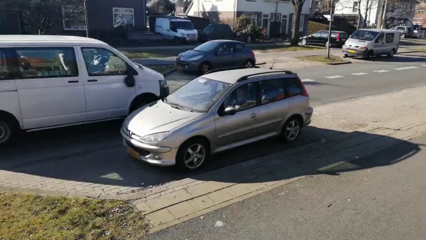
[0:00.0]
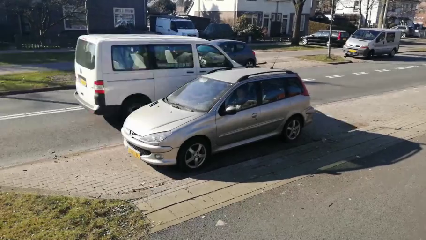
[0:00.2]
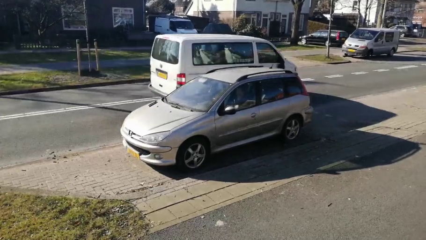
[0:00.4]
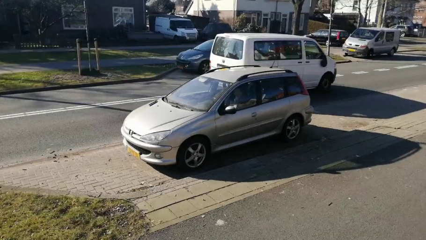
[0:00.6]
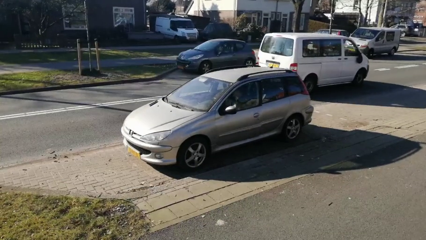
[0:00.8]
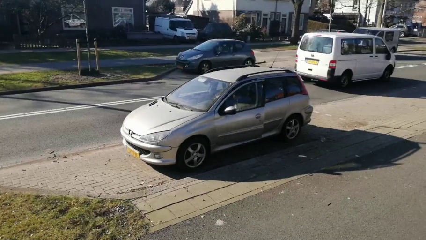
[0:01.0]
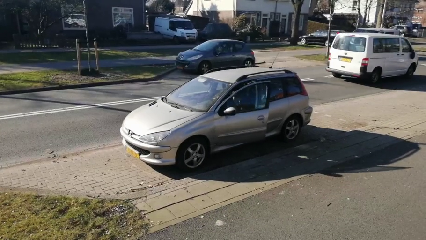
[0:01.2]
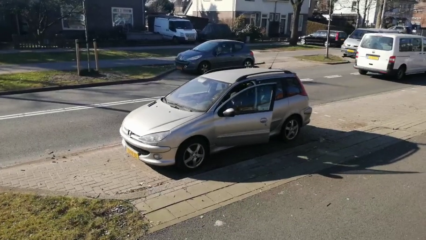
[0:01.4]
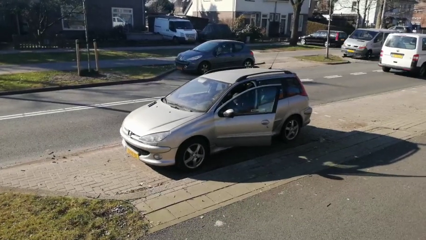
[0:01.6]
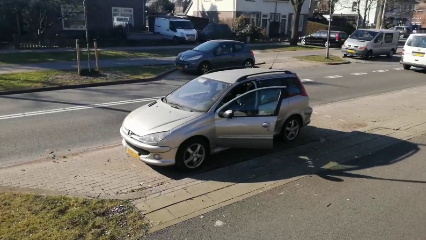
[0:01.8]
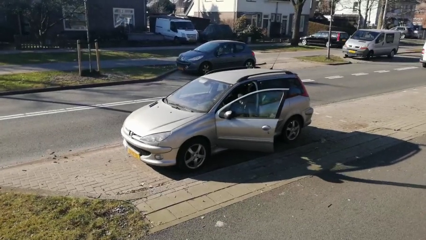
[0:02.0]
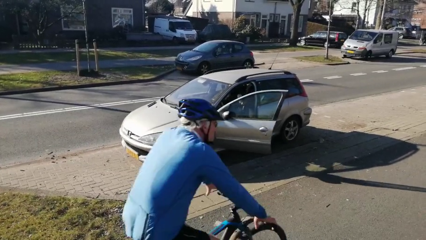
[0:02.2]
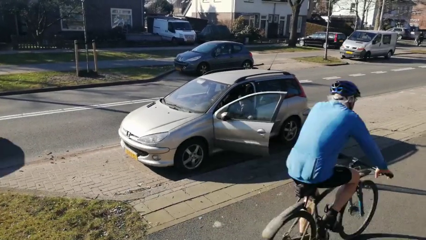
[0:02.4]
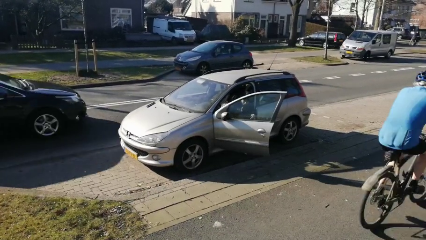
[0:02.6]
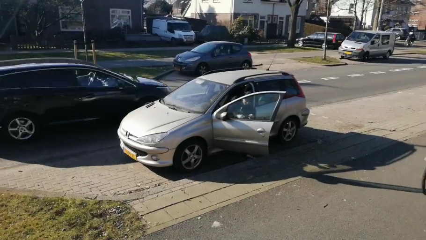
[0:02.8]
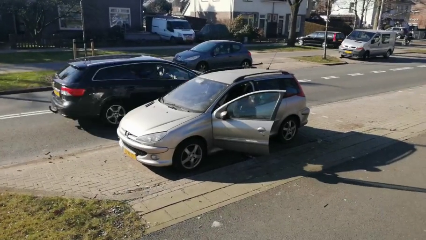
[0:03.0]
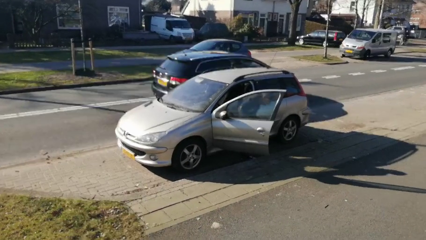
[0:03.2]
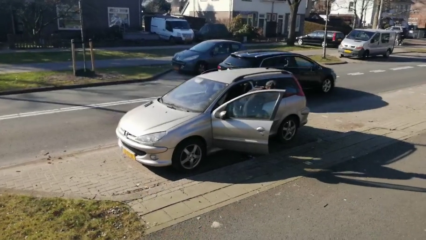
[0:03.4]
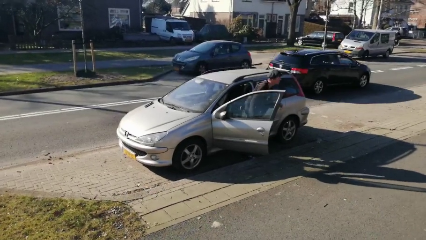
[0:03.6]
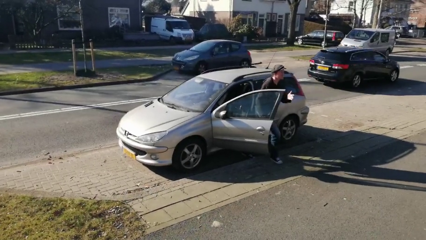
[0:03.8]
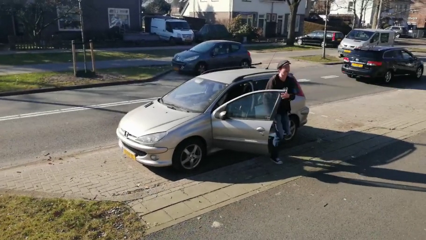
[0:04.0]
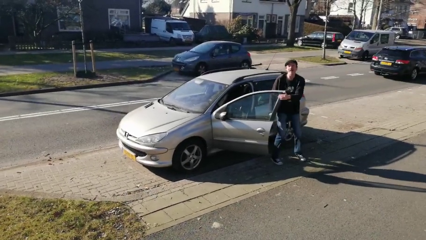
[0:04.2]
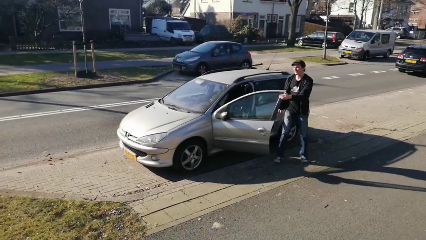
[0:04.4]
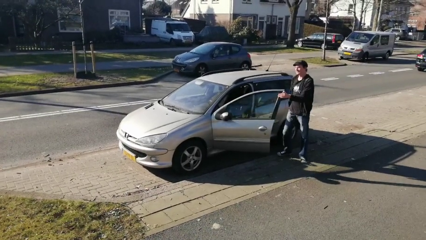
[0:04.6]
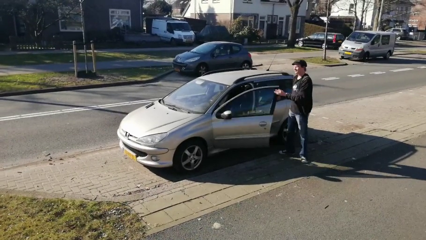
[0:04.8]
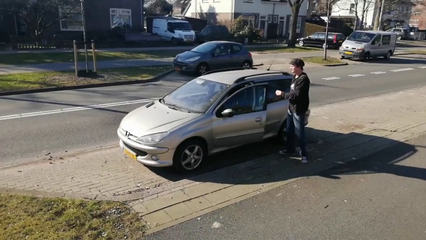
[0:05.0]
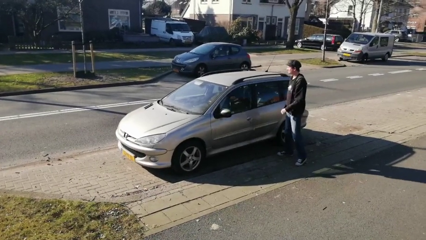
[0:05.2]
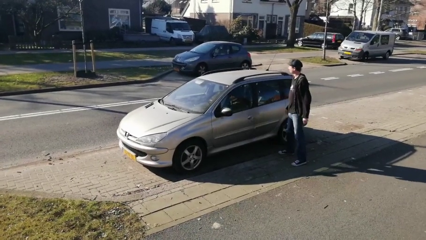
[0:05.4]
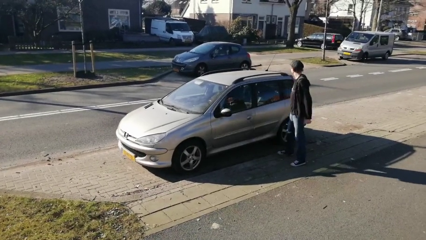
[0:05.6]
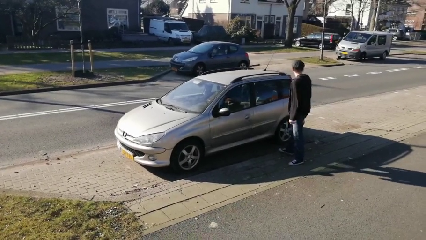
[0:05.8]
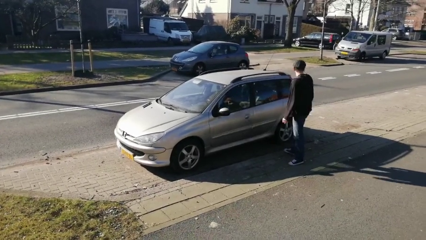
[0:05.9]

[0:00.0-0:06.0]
car drops off person

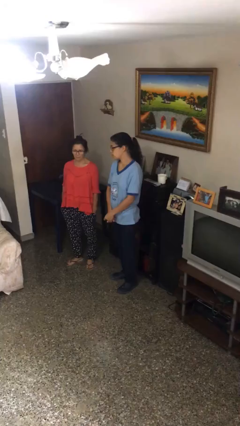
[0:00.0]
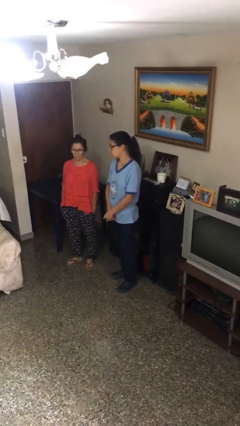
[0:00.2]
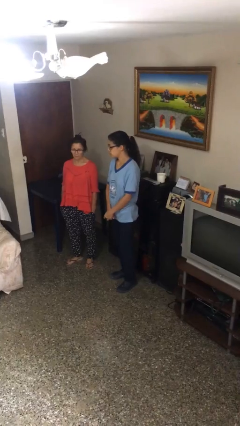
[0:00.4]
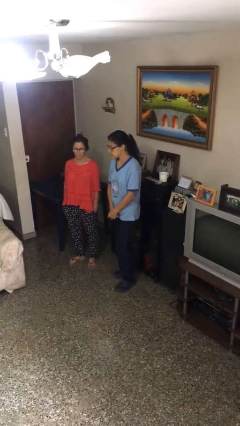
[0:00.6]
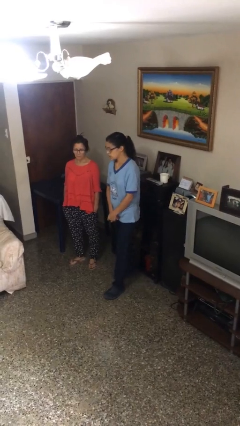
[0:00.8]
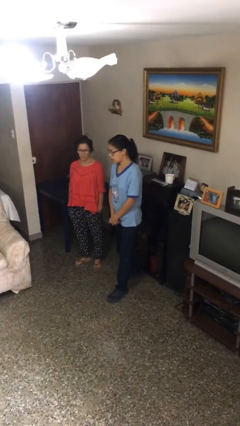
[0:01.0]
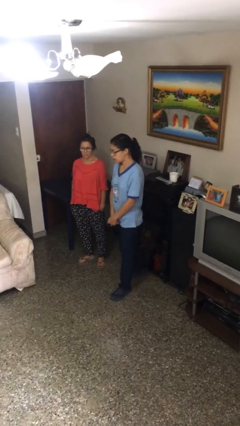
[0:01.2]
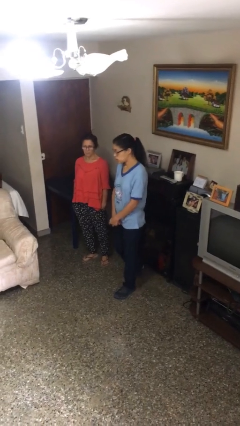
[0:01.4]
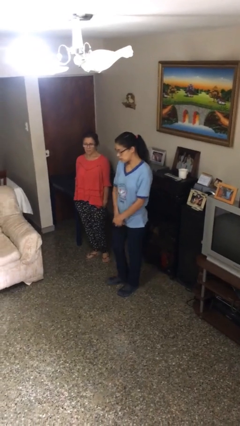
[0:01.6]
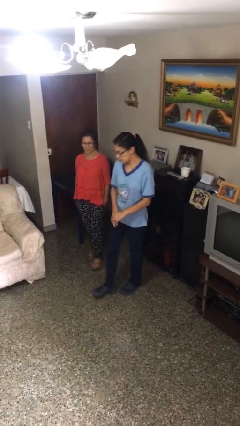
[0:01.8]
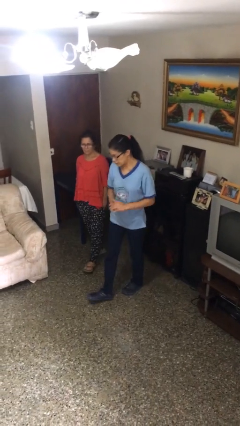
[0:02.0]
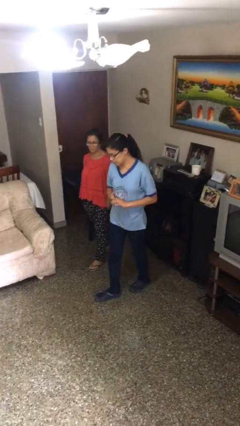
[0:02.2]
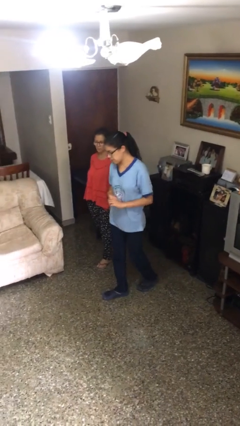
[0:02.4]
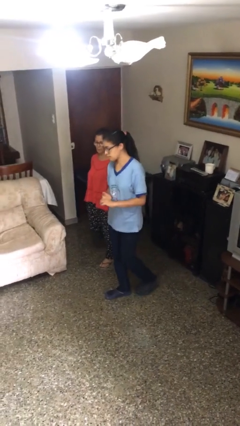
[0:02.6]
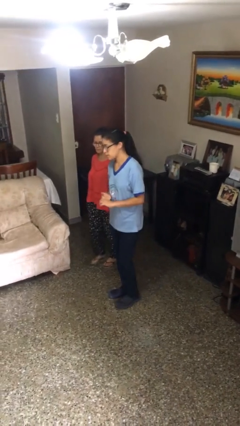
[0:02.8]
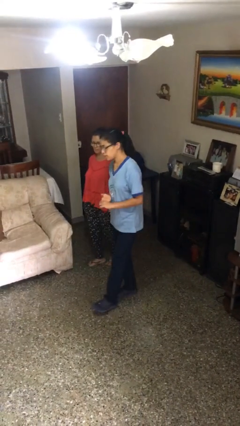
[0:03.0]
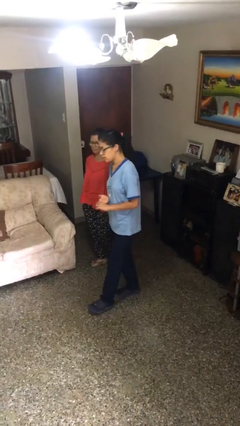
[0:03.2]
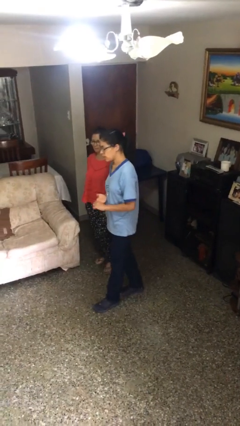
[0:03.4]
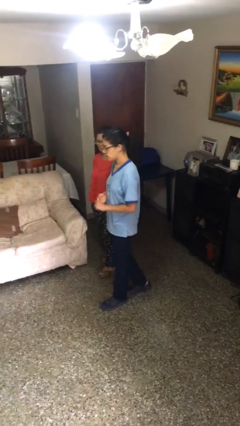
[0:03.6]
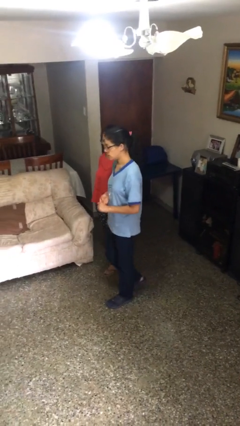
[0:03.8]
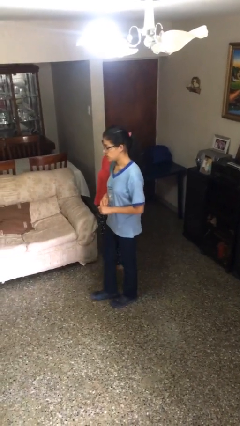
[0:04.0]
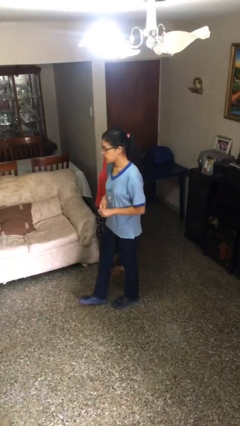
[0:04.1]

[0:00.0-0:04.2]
person talks to person

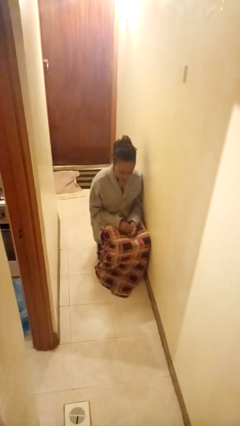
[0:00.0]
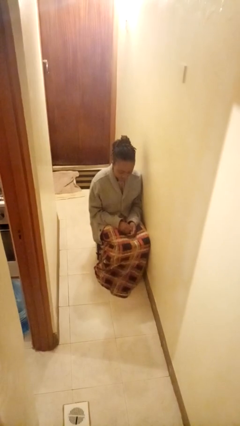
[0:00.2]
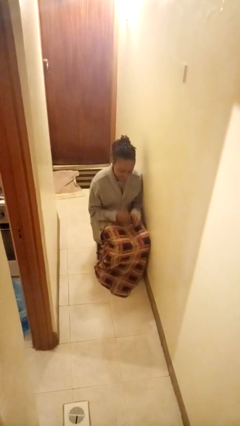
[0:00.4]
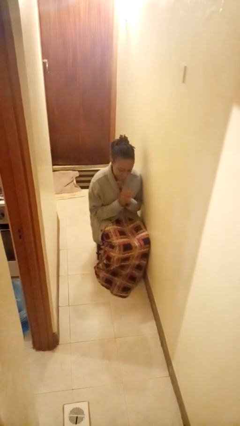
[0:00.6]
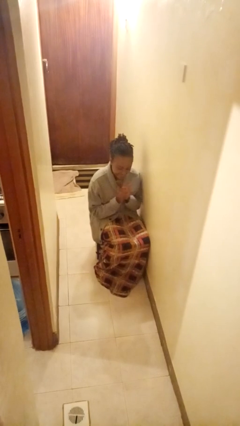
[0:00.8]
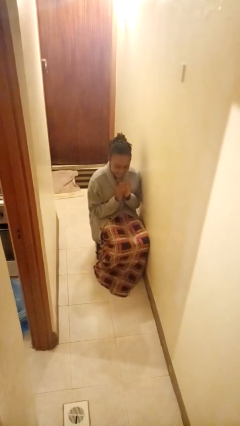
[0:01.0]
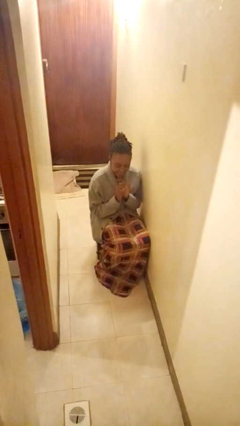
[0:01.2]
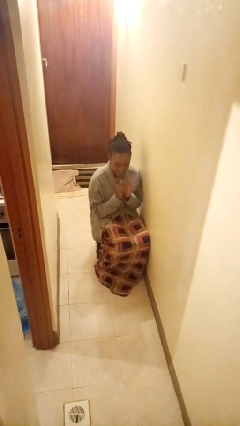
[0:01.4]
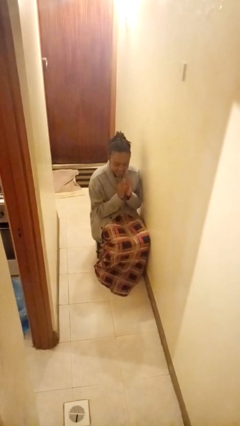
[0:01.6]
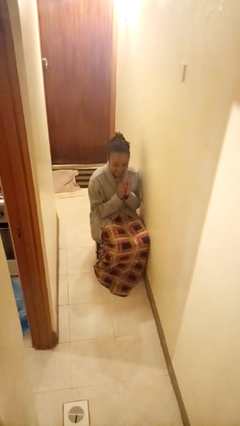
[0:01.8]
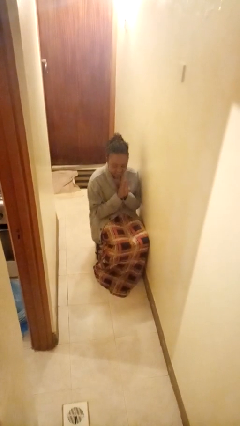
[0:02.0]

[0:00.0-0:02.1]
person claps hands

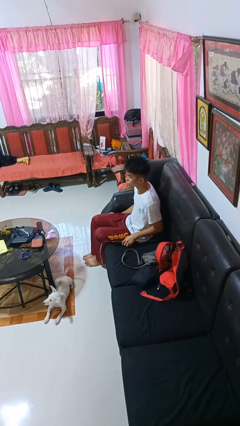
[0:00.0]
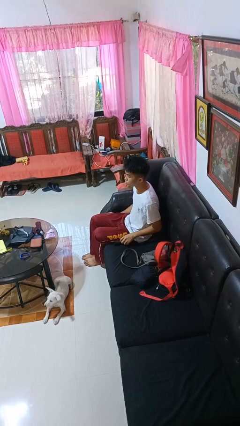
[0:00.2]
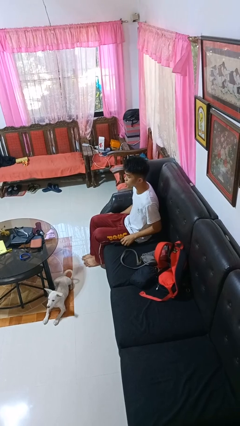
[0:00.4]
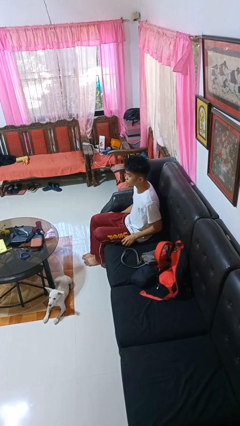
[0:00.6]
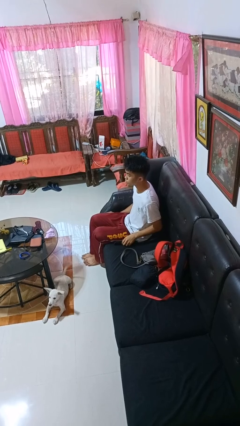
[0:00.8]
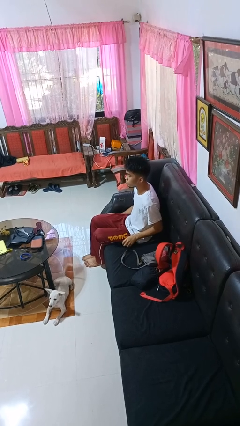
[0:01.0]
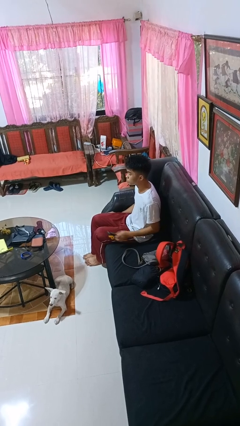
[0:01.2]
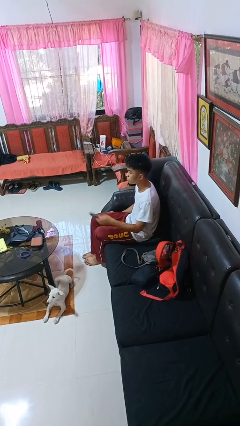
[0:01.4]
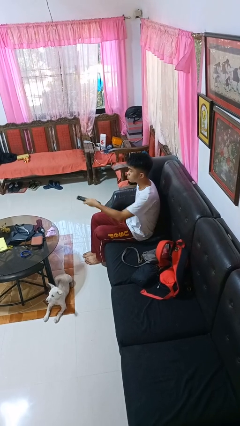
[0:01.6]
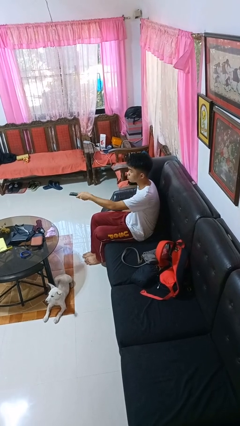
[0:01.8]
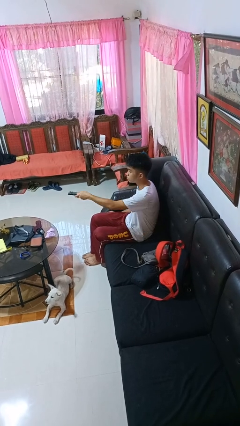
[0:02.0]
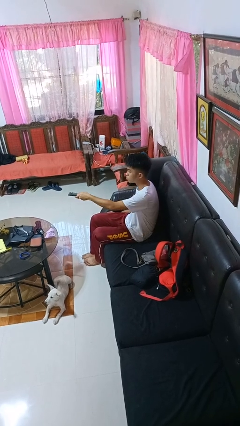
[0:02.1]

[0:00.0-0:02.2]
person puts down object on shelf

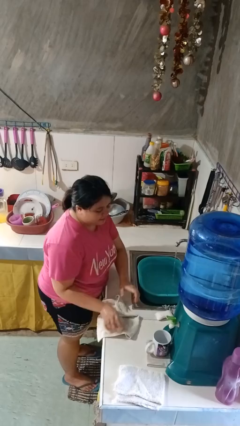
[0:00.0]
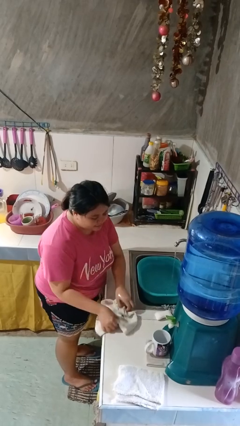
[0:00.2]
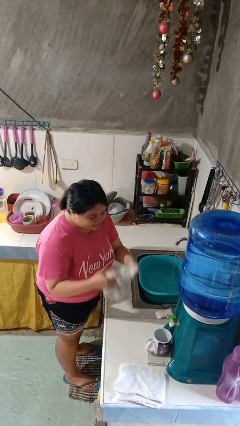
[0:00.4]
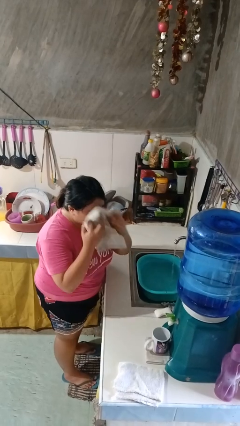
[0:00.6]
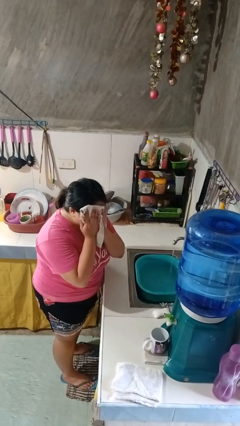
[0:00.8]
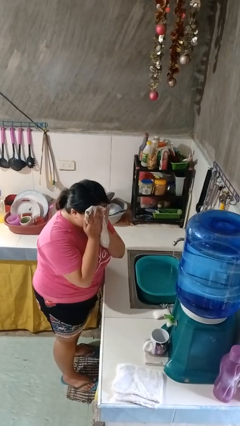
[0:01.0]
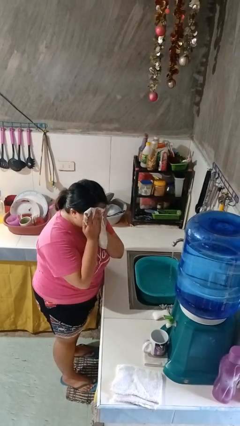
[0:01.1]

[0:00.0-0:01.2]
person dries face with towel

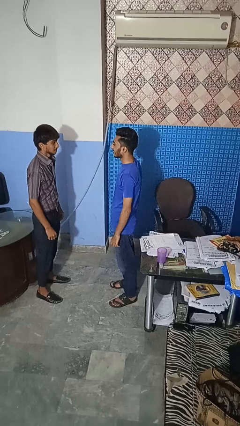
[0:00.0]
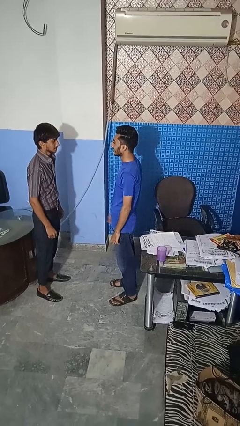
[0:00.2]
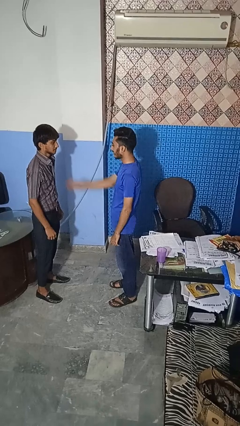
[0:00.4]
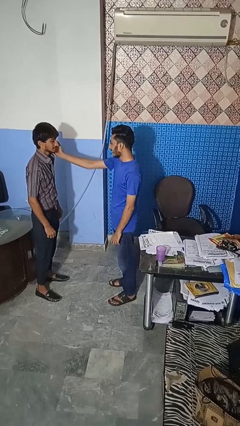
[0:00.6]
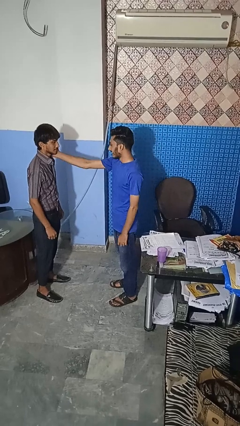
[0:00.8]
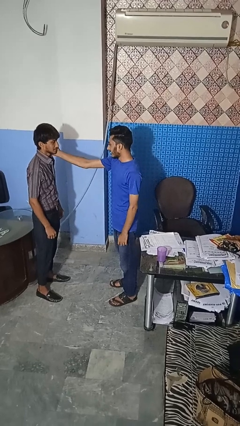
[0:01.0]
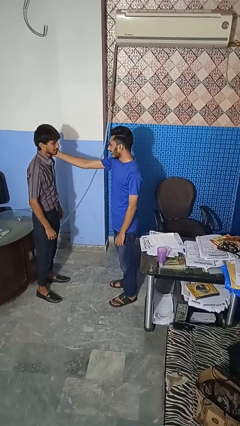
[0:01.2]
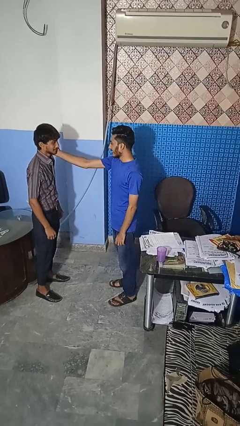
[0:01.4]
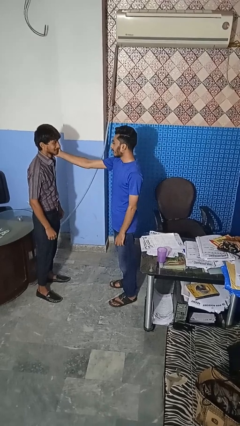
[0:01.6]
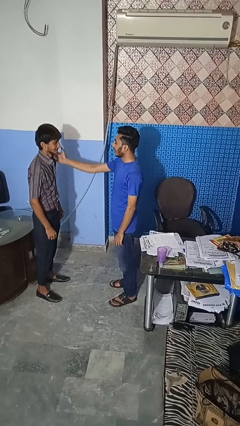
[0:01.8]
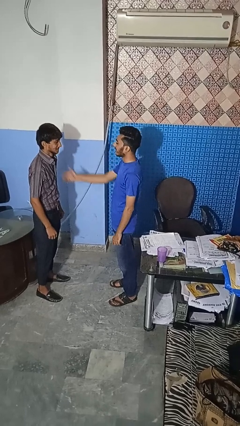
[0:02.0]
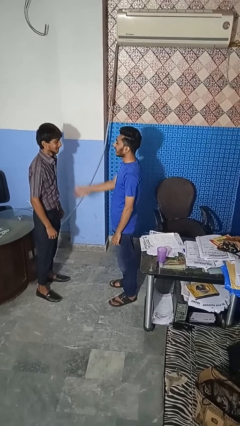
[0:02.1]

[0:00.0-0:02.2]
person touches face of person
